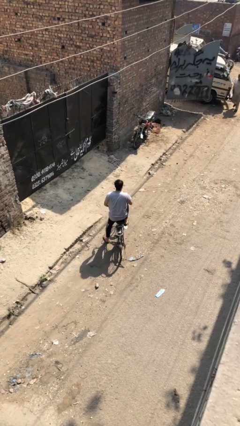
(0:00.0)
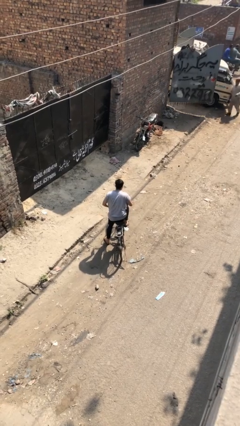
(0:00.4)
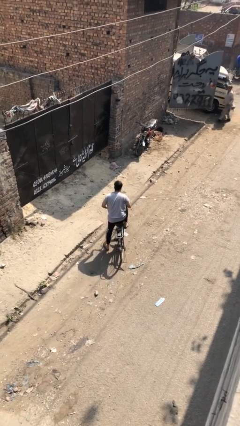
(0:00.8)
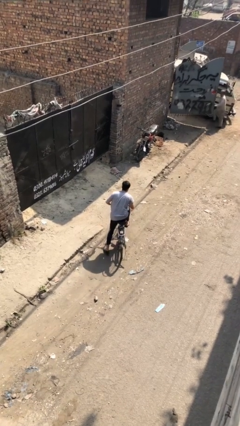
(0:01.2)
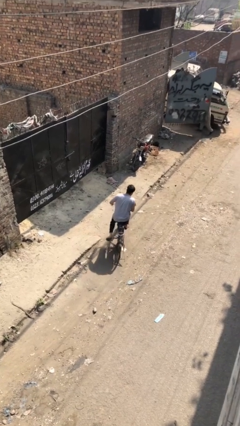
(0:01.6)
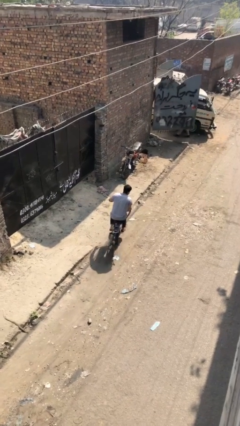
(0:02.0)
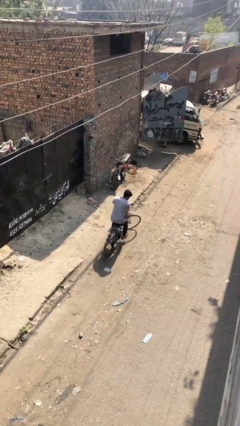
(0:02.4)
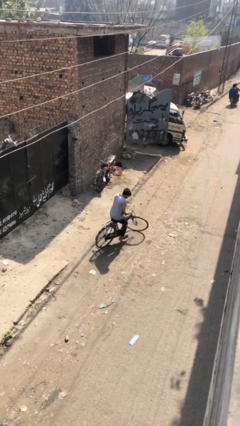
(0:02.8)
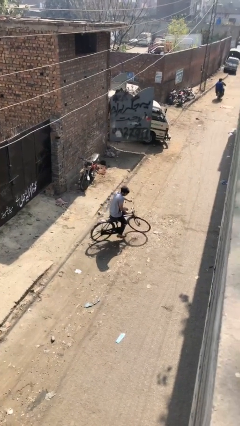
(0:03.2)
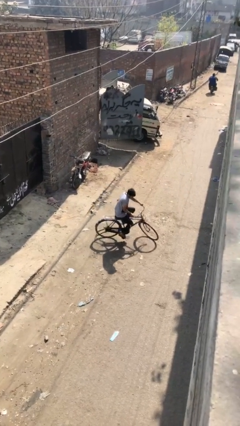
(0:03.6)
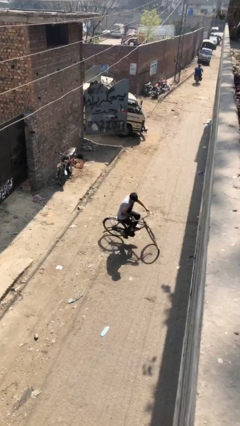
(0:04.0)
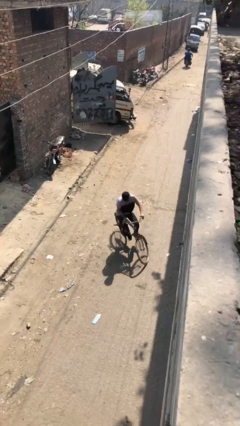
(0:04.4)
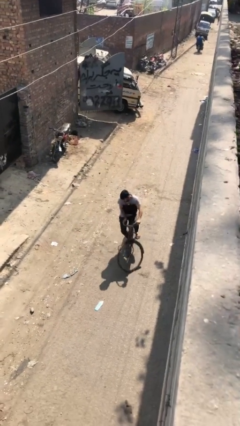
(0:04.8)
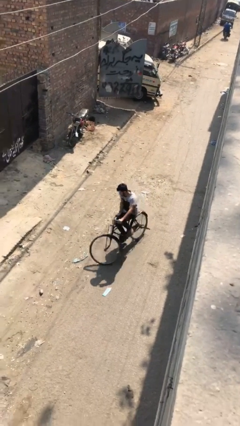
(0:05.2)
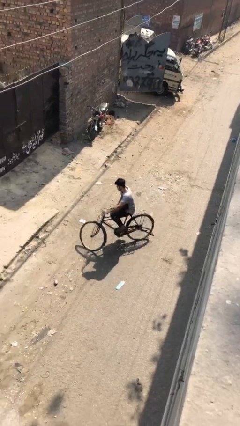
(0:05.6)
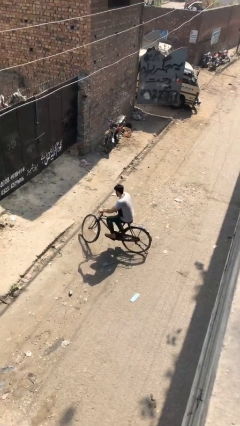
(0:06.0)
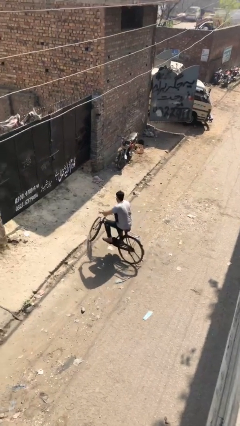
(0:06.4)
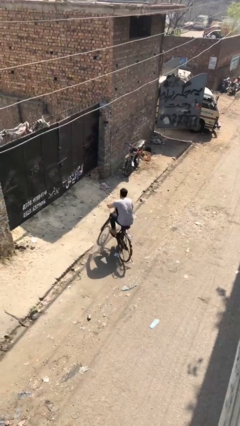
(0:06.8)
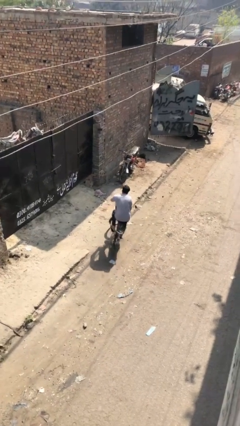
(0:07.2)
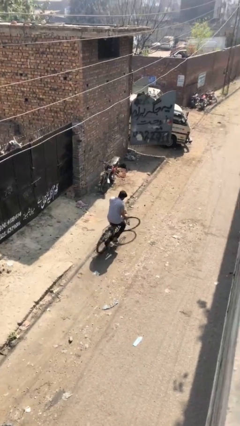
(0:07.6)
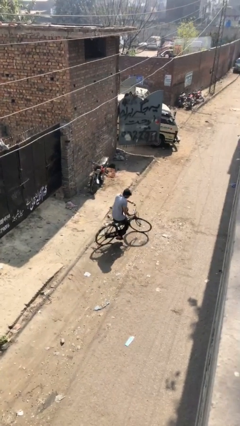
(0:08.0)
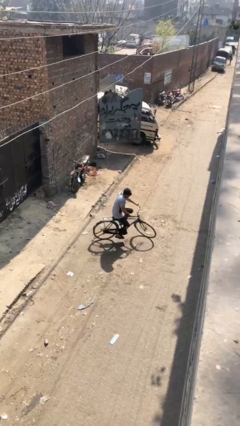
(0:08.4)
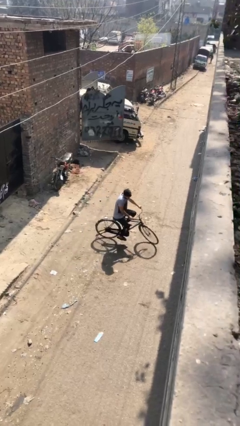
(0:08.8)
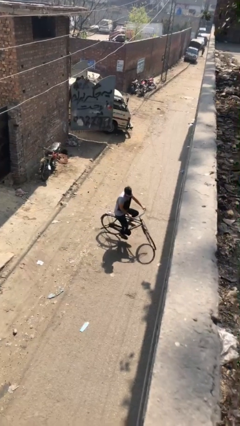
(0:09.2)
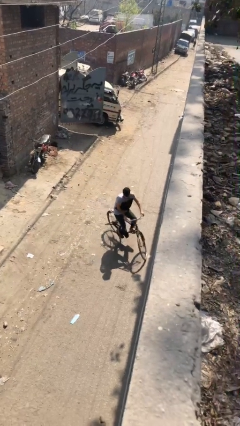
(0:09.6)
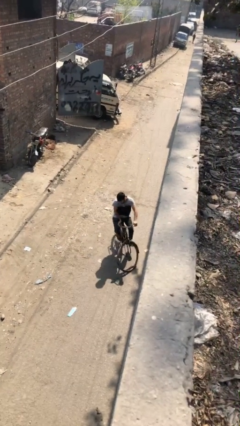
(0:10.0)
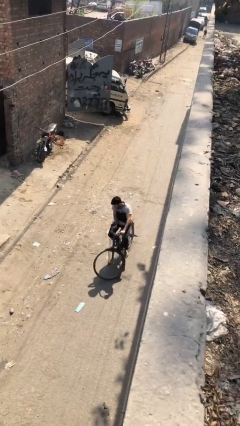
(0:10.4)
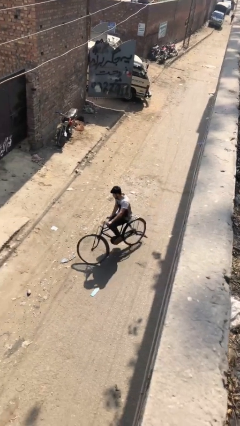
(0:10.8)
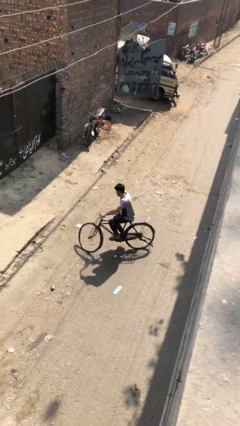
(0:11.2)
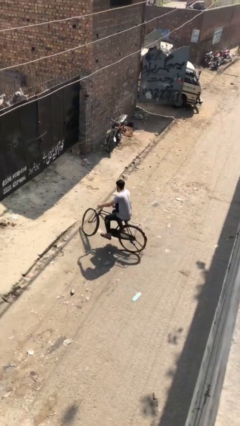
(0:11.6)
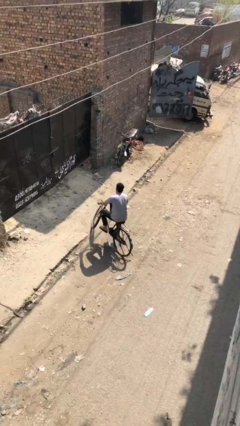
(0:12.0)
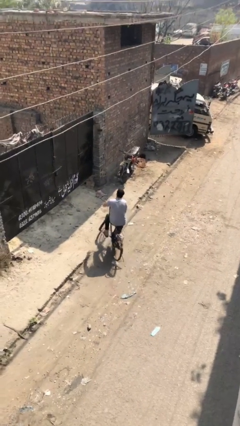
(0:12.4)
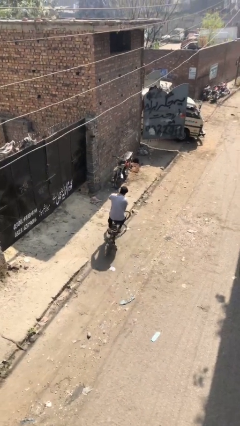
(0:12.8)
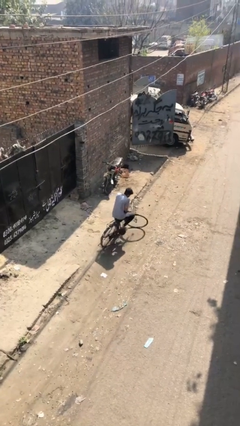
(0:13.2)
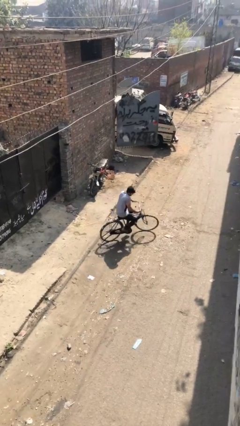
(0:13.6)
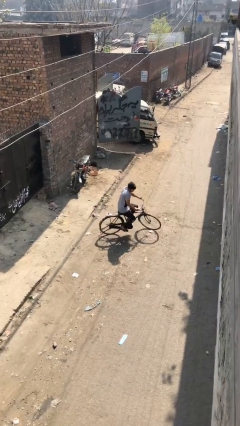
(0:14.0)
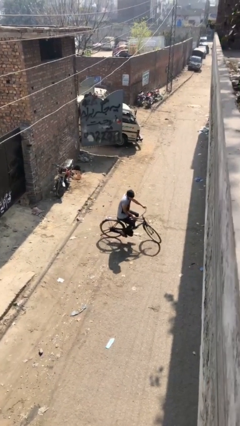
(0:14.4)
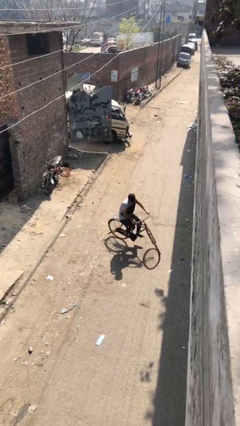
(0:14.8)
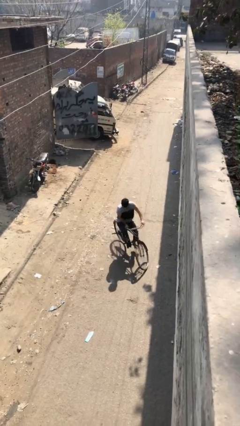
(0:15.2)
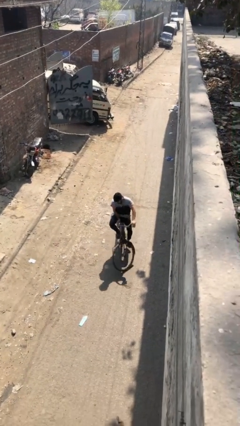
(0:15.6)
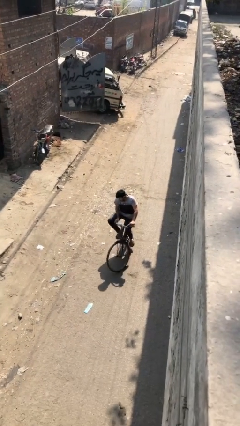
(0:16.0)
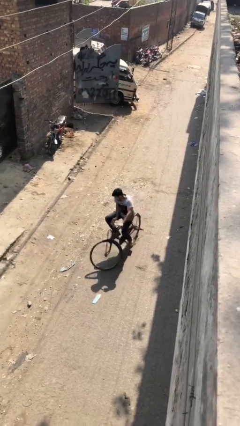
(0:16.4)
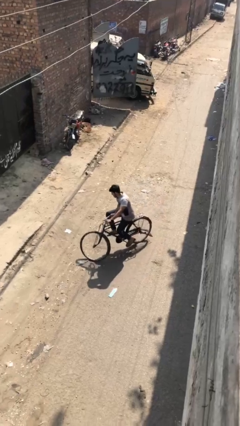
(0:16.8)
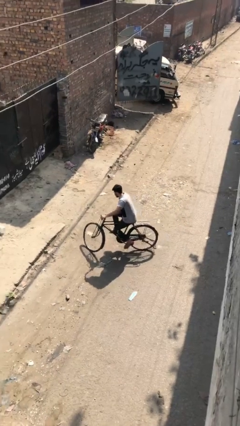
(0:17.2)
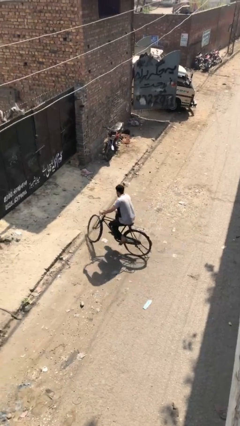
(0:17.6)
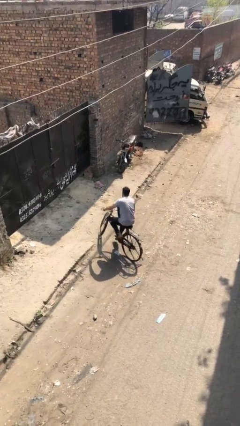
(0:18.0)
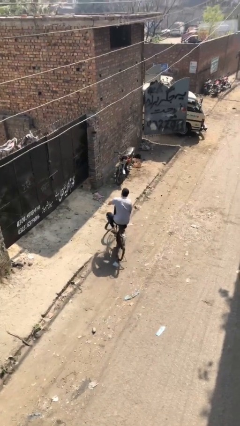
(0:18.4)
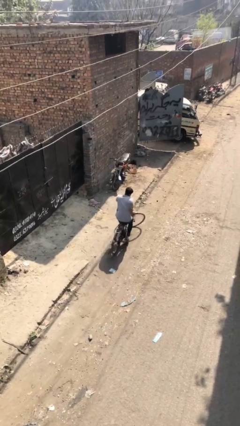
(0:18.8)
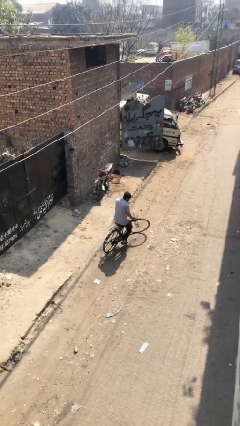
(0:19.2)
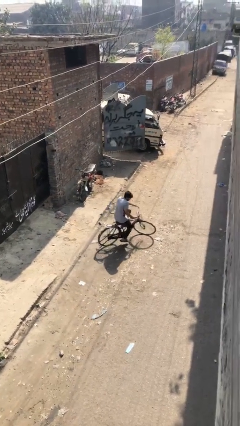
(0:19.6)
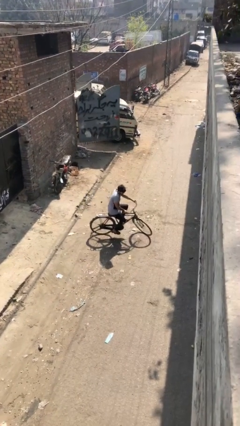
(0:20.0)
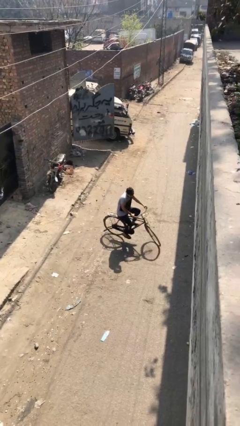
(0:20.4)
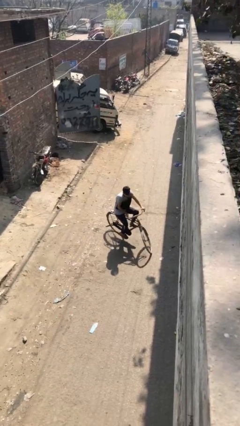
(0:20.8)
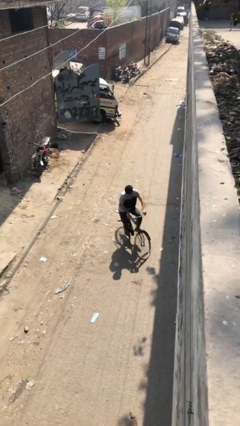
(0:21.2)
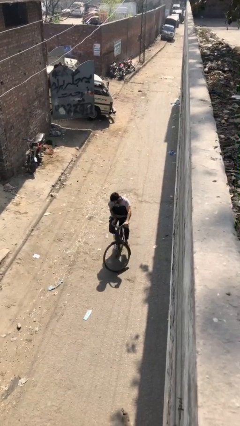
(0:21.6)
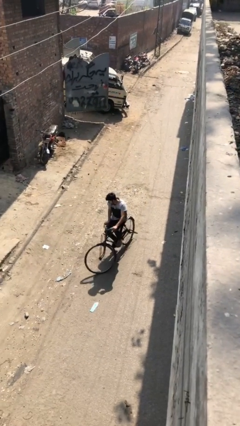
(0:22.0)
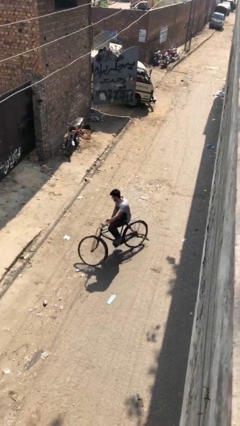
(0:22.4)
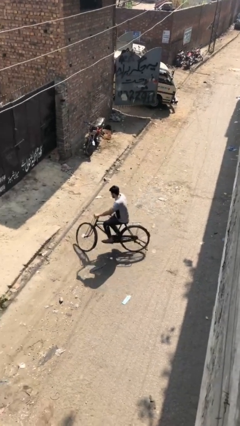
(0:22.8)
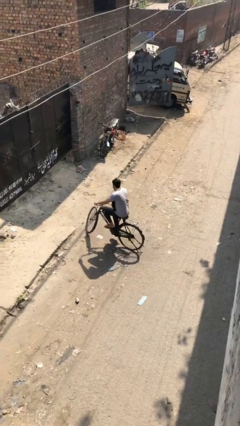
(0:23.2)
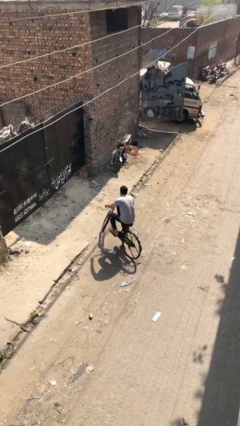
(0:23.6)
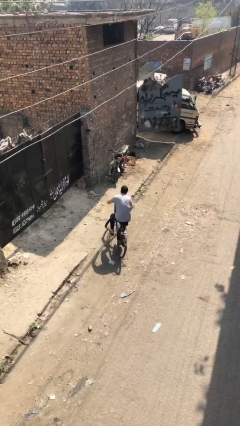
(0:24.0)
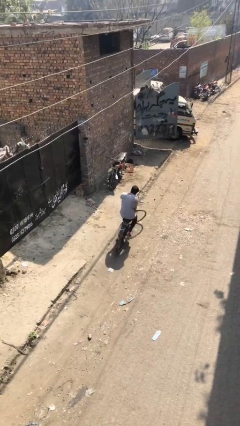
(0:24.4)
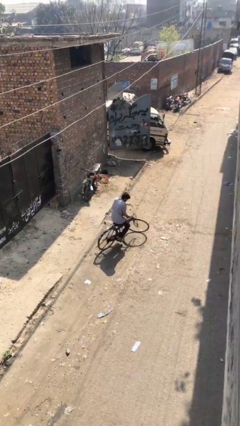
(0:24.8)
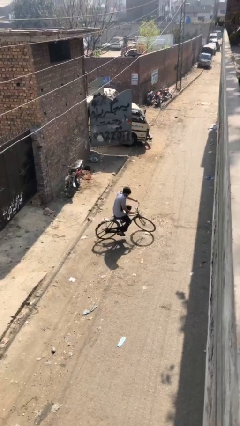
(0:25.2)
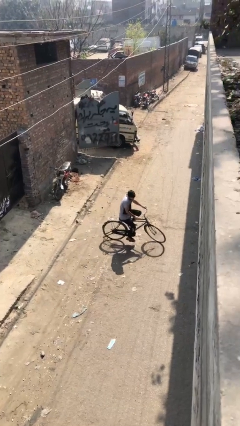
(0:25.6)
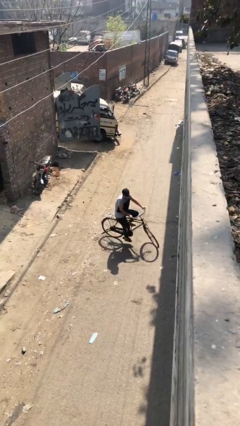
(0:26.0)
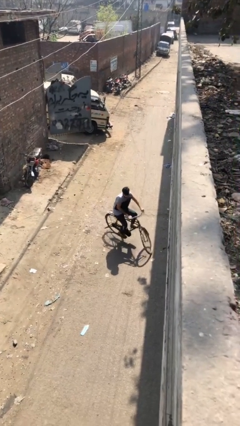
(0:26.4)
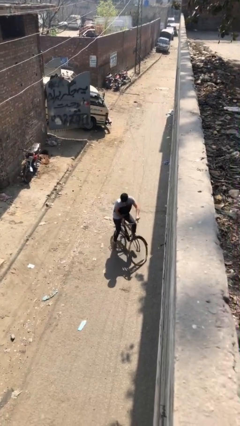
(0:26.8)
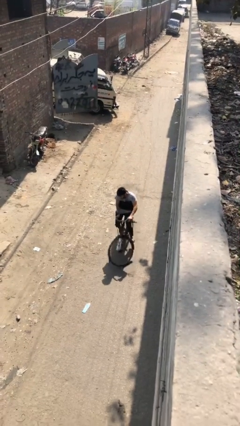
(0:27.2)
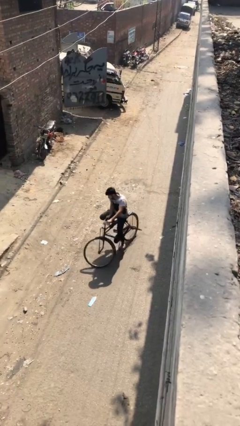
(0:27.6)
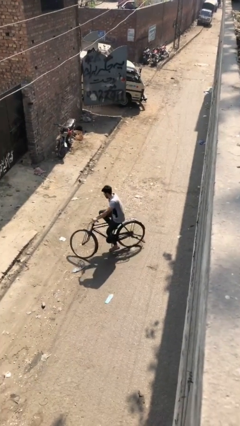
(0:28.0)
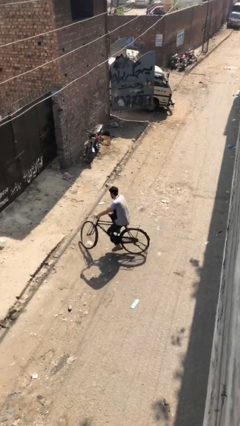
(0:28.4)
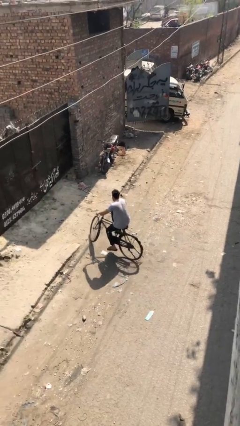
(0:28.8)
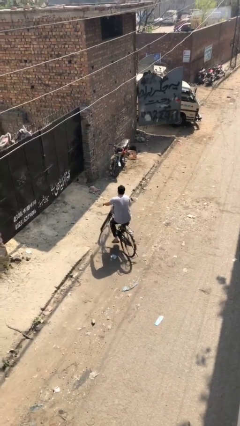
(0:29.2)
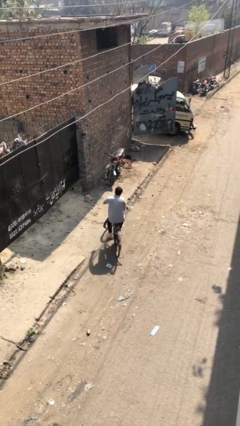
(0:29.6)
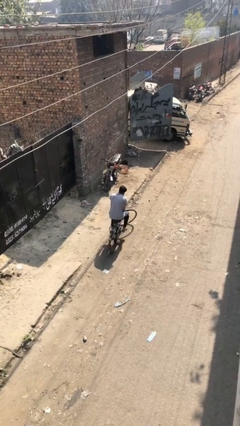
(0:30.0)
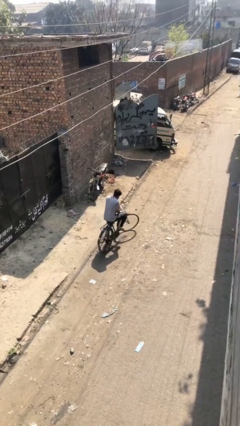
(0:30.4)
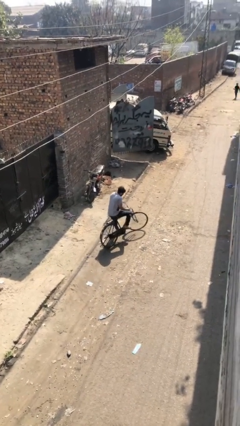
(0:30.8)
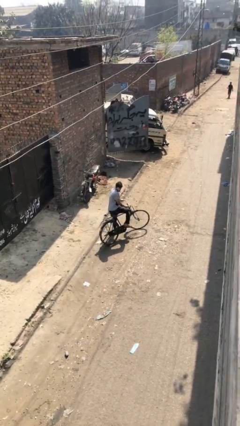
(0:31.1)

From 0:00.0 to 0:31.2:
person rides bicycle

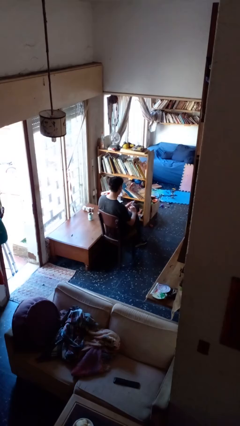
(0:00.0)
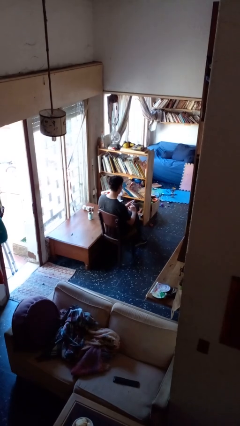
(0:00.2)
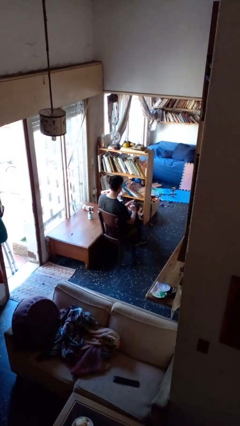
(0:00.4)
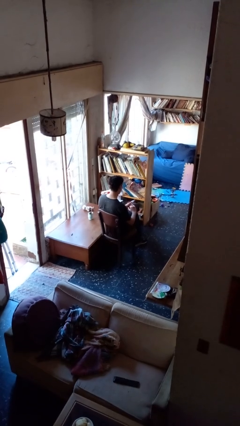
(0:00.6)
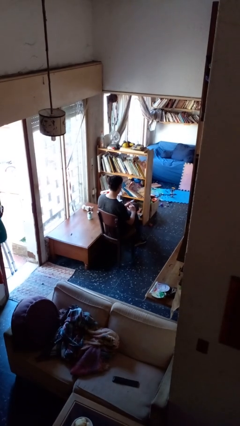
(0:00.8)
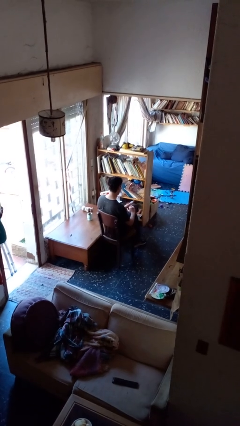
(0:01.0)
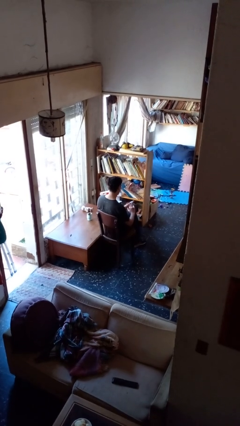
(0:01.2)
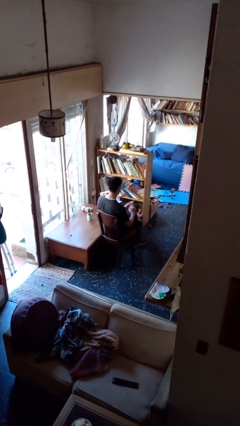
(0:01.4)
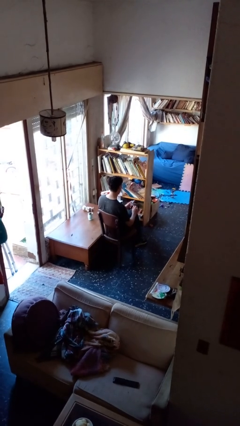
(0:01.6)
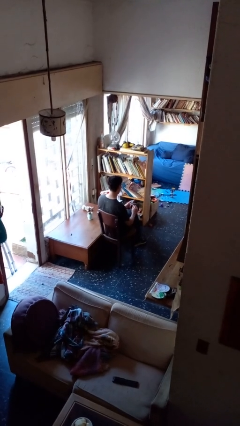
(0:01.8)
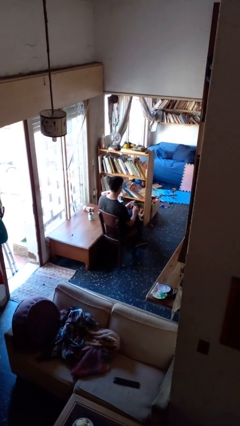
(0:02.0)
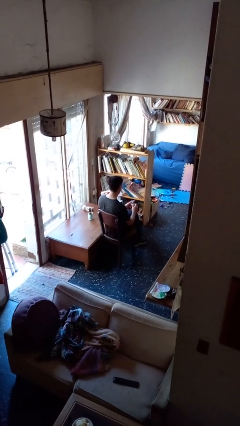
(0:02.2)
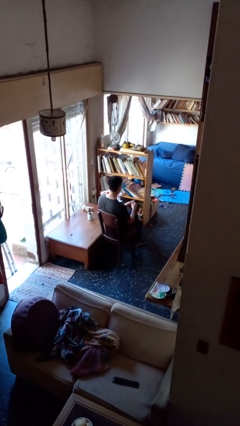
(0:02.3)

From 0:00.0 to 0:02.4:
person clips fingernails

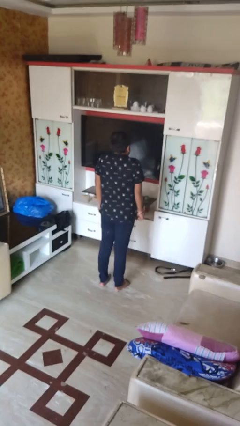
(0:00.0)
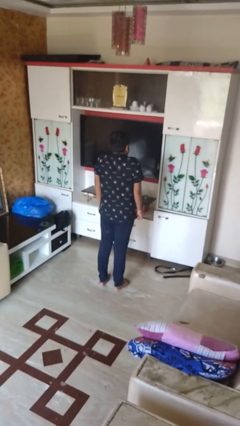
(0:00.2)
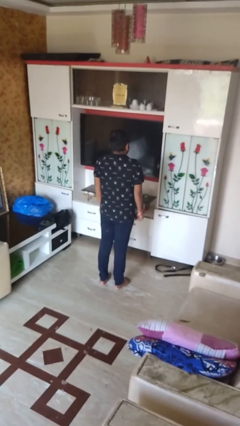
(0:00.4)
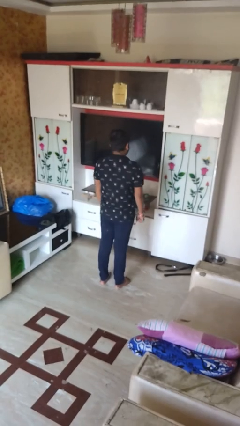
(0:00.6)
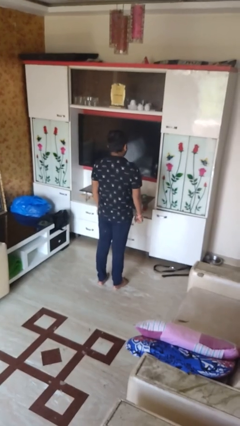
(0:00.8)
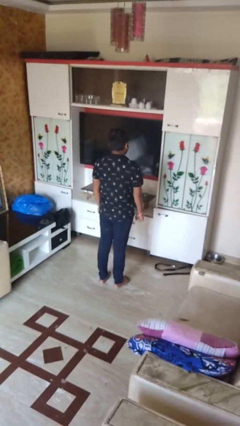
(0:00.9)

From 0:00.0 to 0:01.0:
person shrugs
